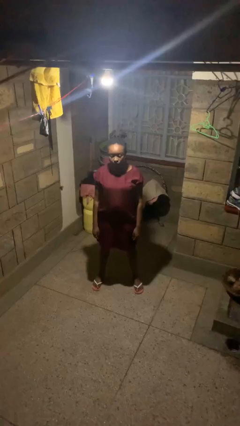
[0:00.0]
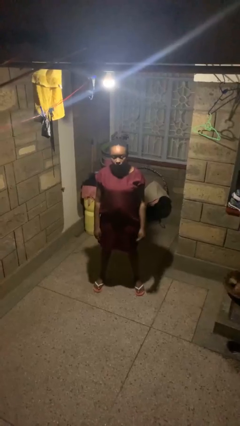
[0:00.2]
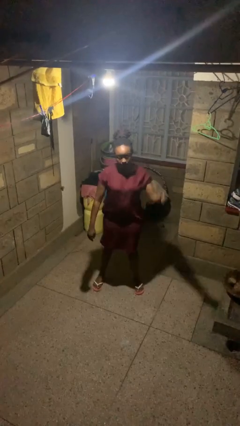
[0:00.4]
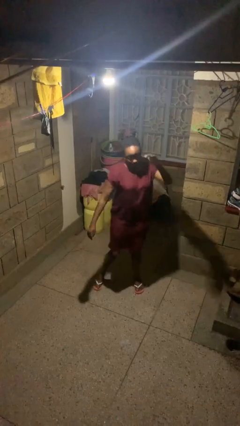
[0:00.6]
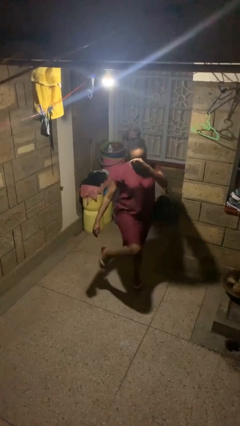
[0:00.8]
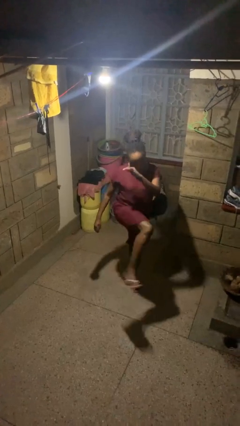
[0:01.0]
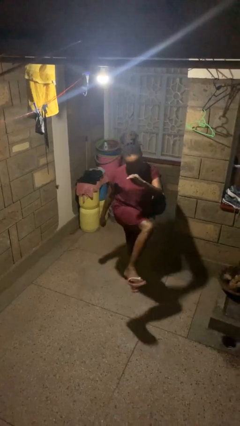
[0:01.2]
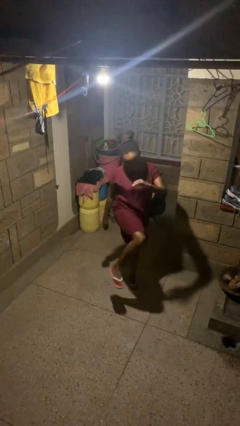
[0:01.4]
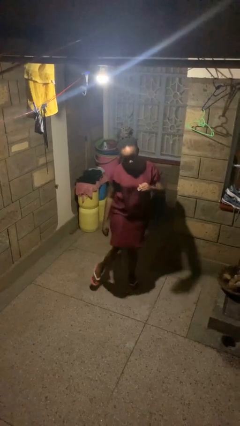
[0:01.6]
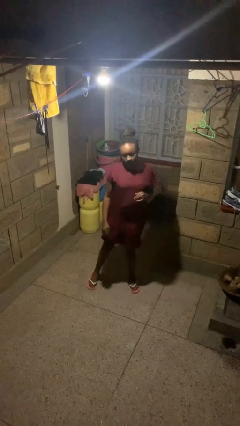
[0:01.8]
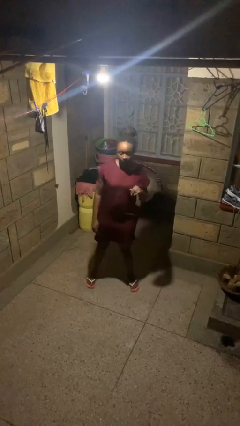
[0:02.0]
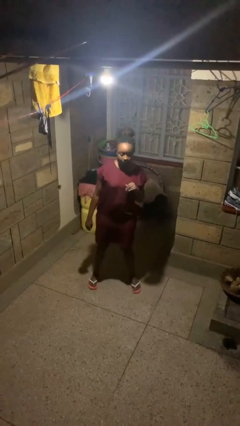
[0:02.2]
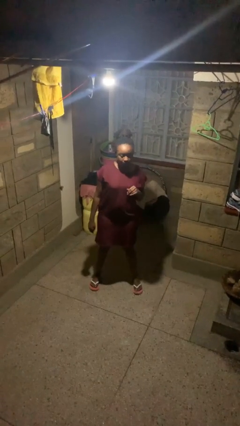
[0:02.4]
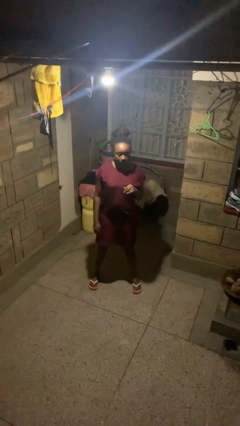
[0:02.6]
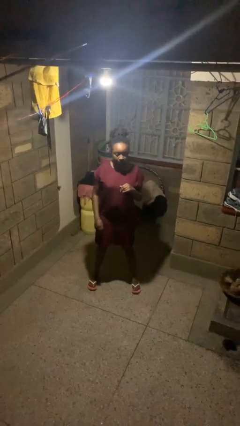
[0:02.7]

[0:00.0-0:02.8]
person karate kicks

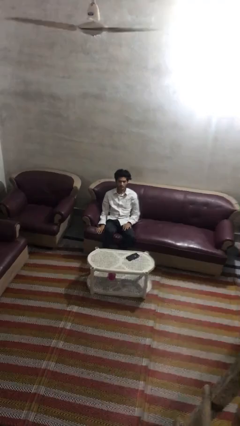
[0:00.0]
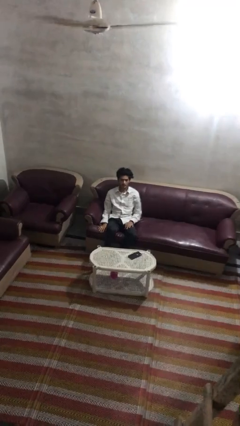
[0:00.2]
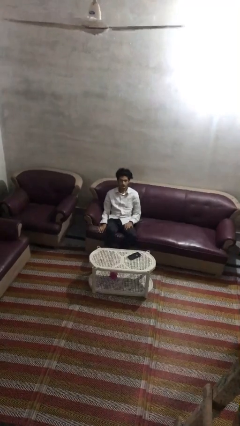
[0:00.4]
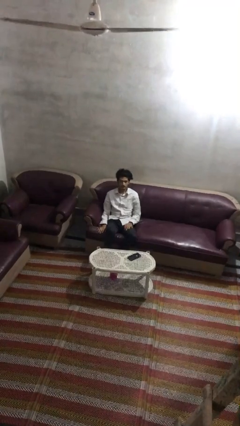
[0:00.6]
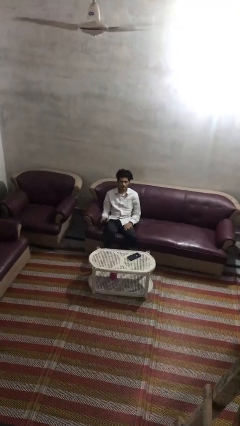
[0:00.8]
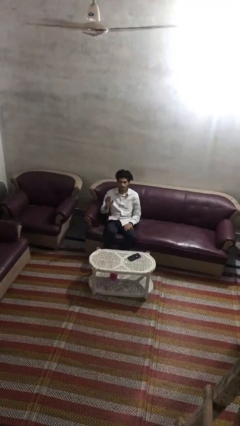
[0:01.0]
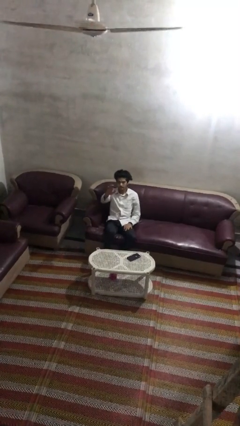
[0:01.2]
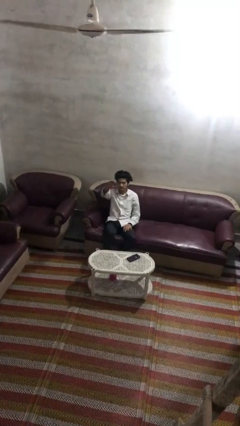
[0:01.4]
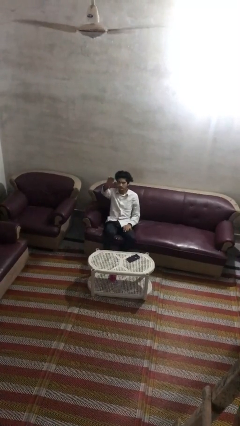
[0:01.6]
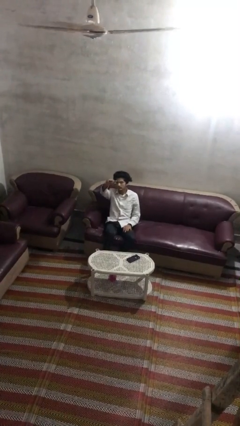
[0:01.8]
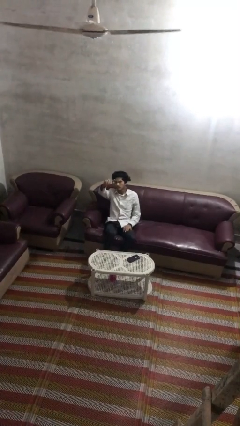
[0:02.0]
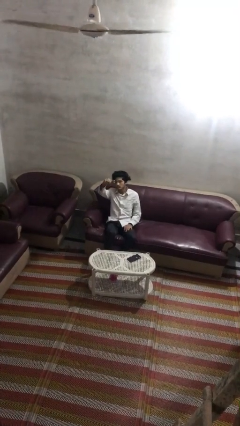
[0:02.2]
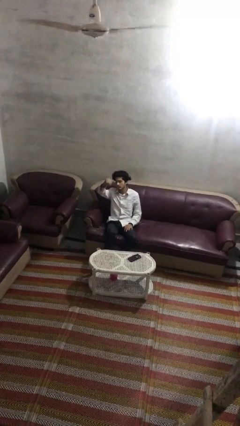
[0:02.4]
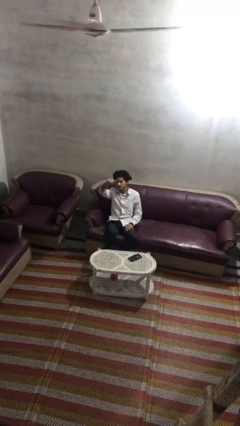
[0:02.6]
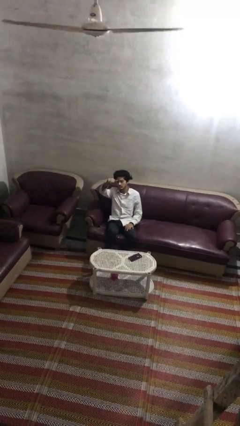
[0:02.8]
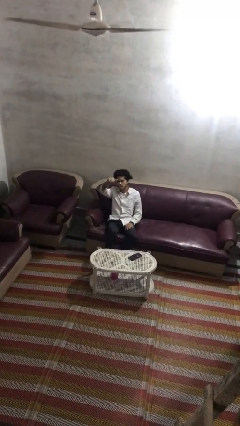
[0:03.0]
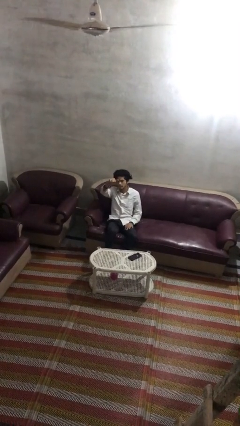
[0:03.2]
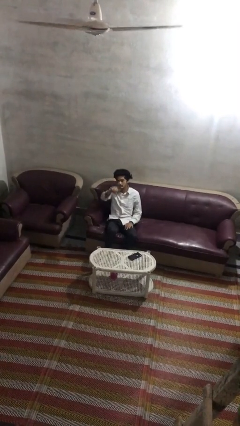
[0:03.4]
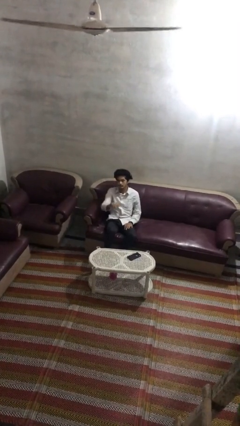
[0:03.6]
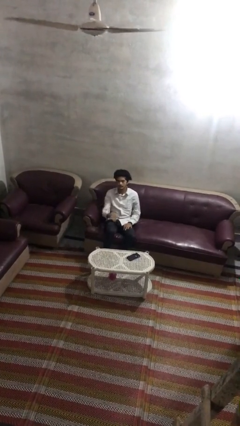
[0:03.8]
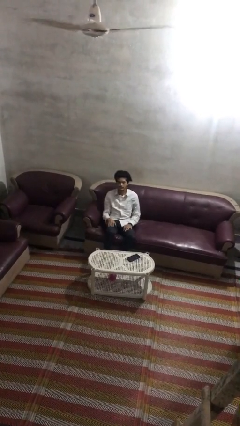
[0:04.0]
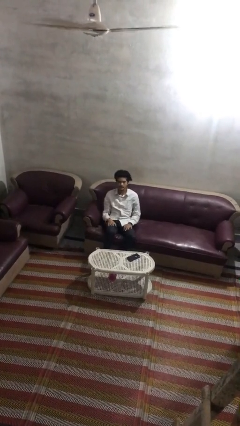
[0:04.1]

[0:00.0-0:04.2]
person gestures come here

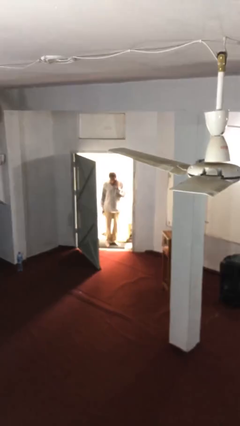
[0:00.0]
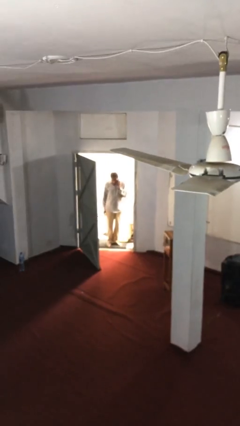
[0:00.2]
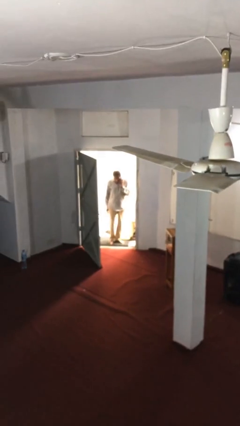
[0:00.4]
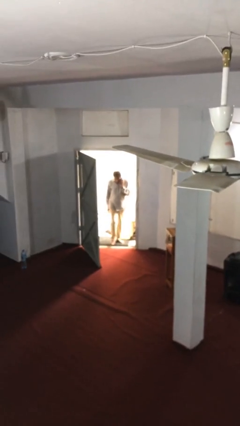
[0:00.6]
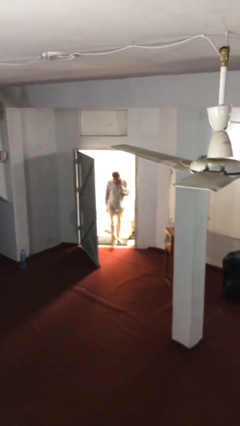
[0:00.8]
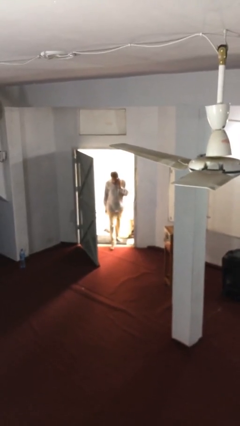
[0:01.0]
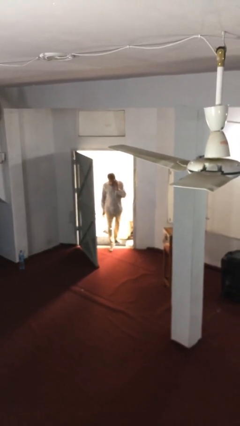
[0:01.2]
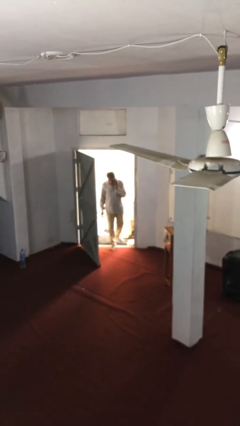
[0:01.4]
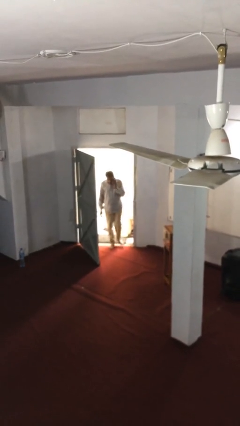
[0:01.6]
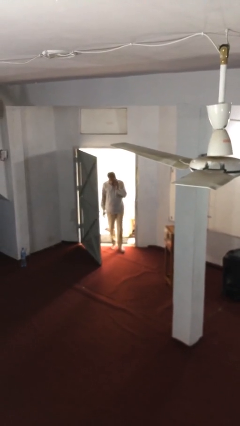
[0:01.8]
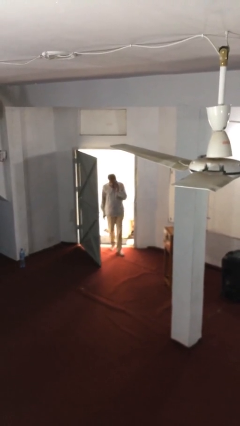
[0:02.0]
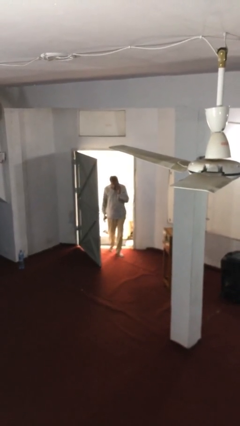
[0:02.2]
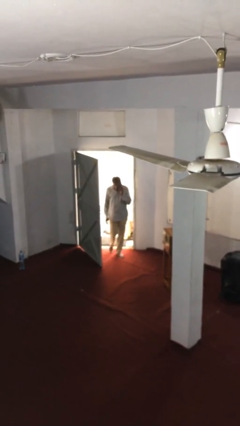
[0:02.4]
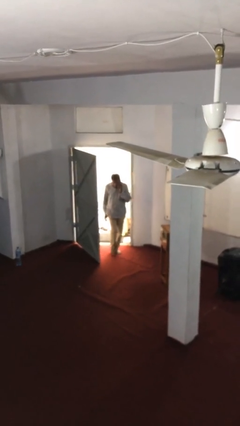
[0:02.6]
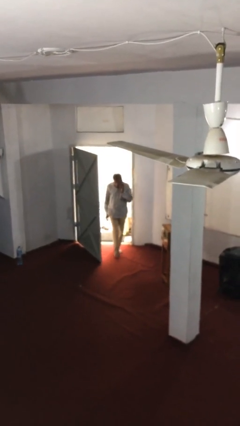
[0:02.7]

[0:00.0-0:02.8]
person enters scene through structure

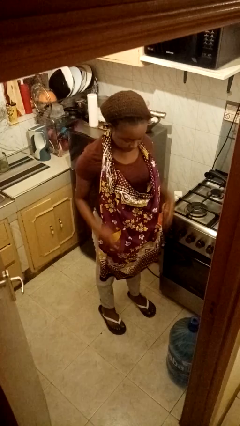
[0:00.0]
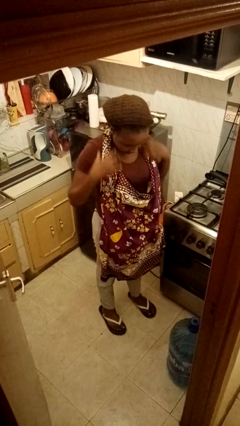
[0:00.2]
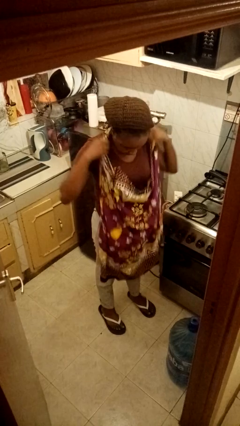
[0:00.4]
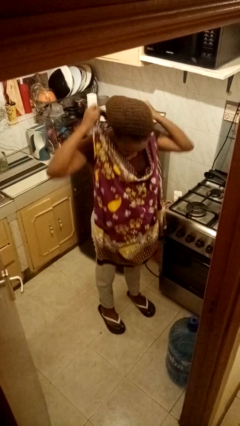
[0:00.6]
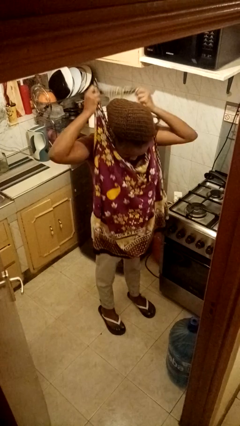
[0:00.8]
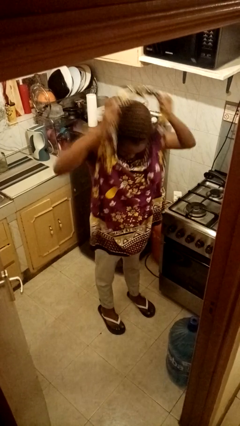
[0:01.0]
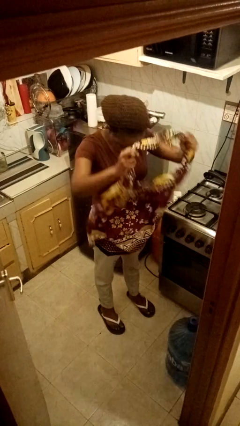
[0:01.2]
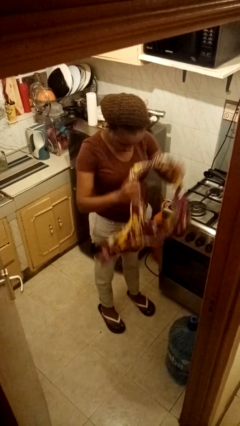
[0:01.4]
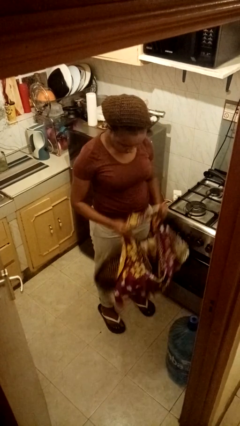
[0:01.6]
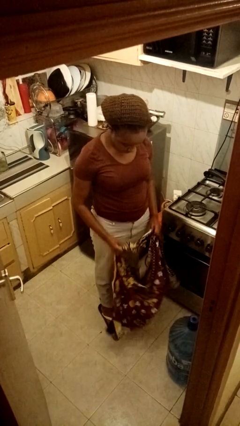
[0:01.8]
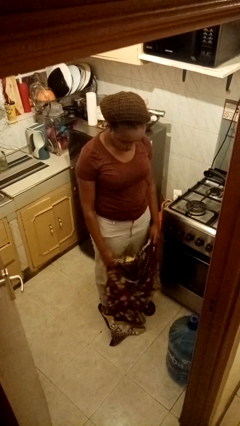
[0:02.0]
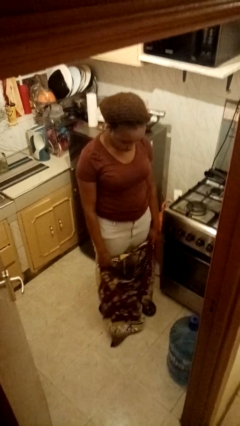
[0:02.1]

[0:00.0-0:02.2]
person takes off apron

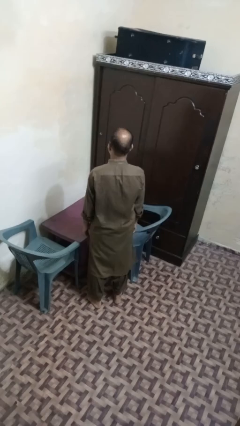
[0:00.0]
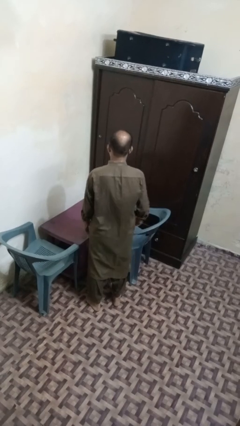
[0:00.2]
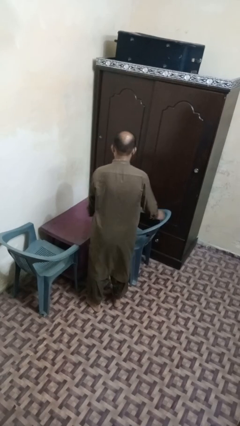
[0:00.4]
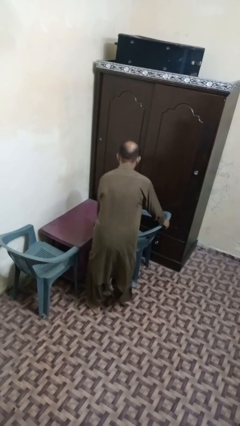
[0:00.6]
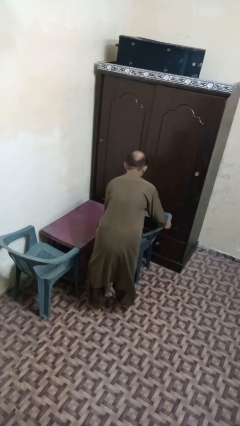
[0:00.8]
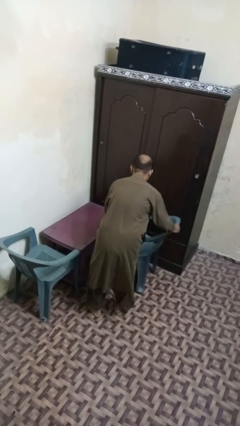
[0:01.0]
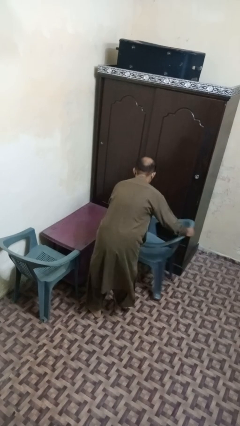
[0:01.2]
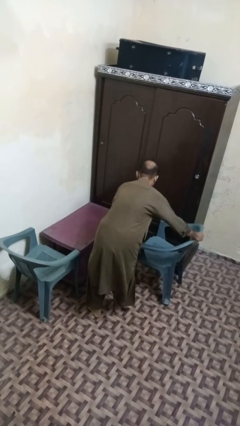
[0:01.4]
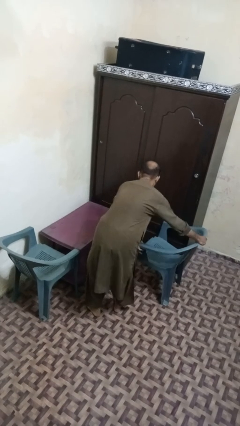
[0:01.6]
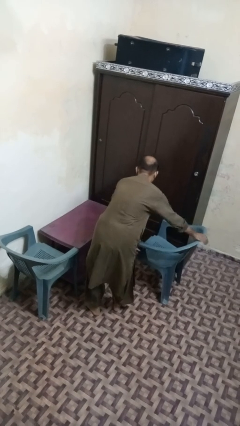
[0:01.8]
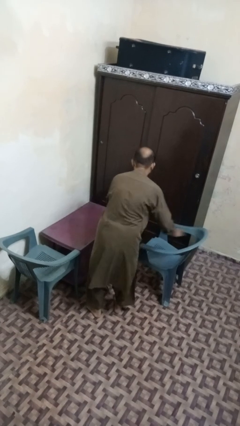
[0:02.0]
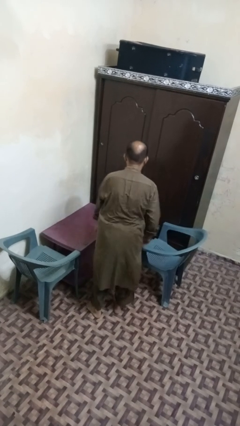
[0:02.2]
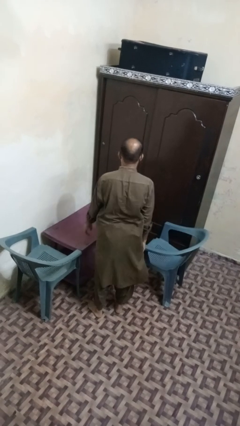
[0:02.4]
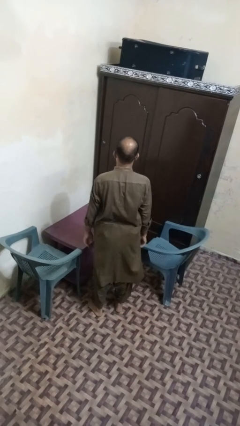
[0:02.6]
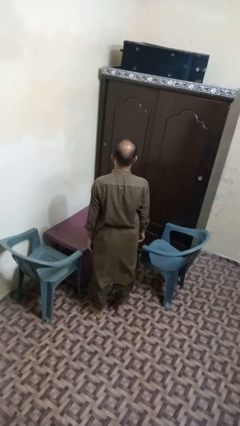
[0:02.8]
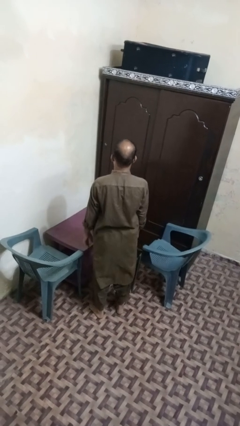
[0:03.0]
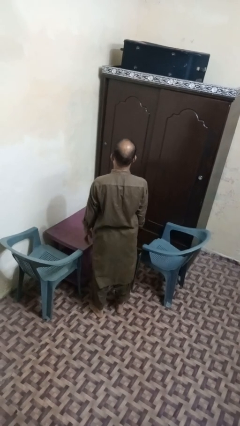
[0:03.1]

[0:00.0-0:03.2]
person pulls out chair

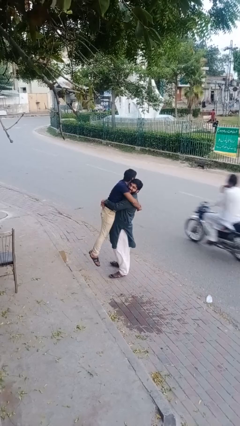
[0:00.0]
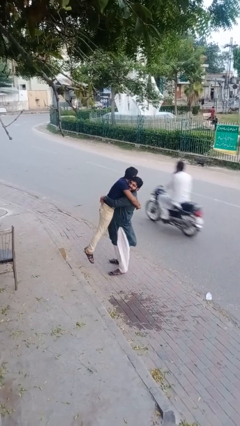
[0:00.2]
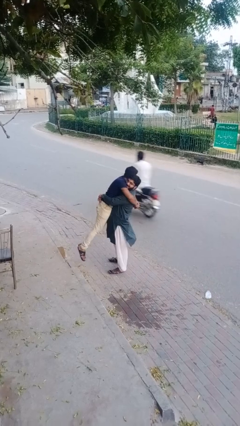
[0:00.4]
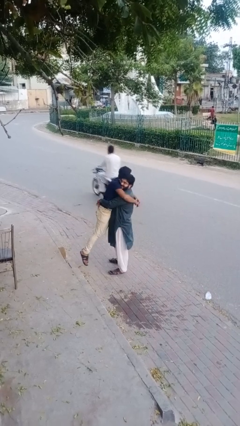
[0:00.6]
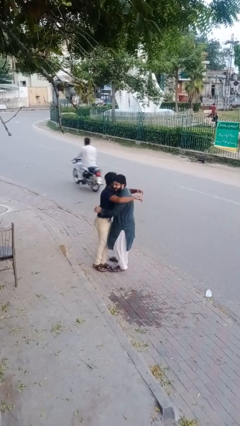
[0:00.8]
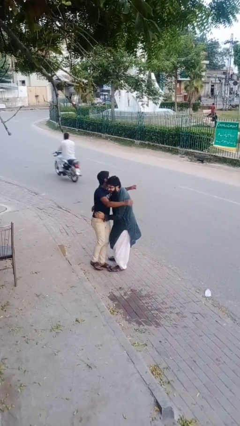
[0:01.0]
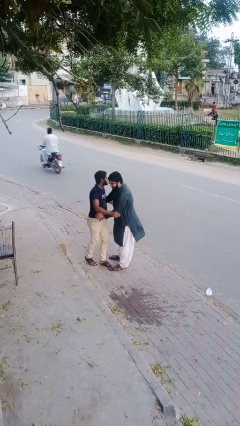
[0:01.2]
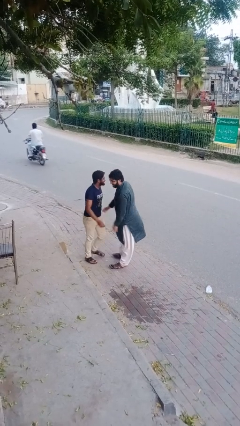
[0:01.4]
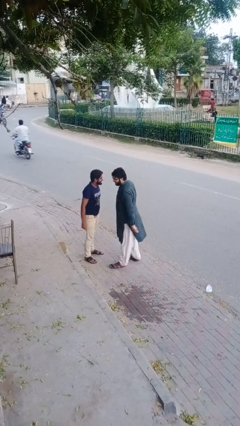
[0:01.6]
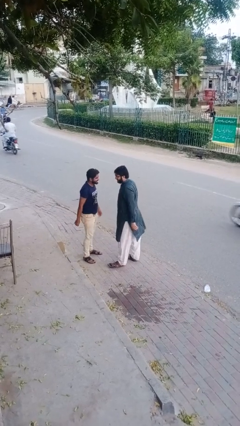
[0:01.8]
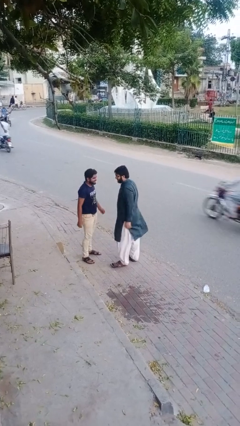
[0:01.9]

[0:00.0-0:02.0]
person puts down person

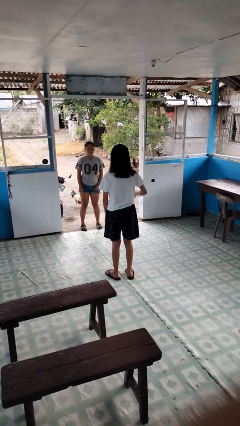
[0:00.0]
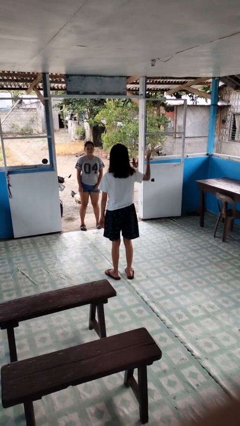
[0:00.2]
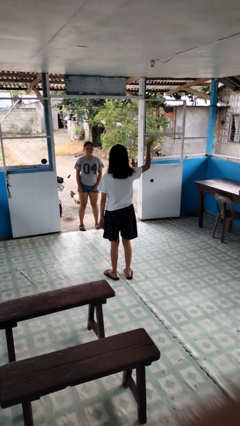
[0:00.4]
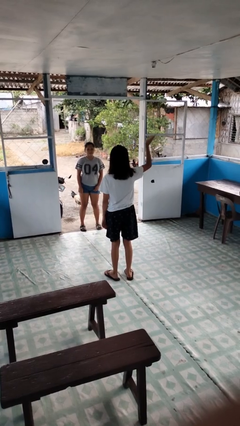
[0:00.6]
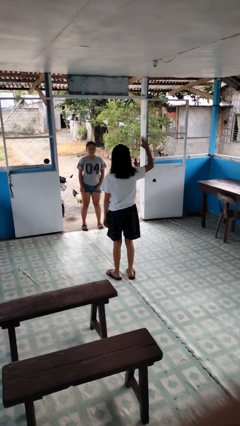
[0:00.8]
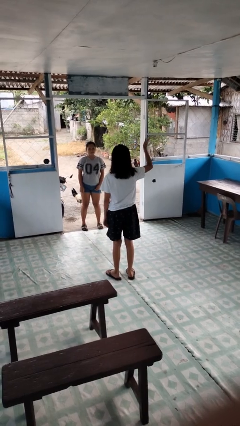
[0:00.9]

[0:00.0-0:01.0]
person waves at person
